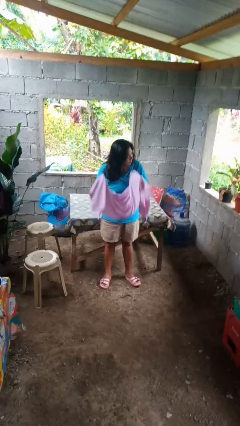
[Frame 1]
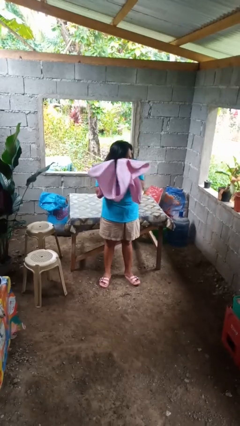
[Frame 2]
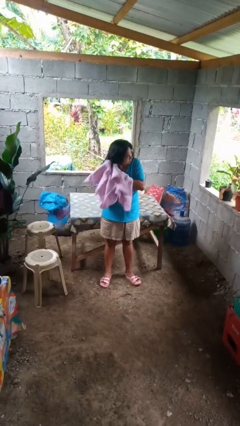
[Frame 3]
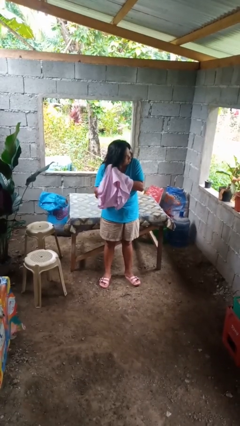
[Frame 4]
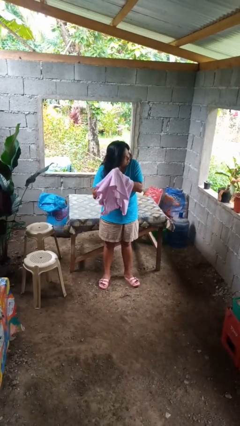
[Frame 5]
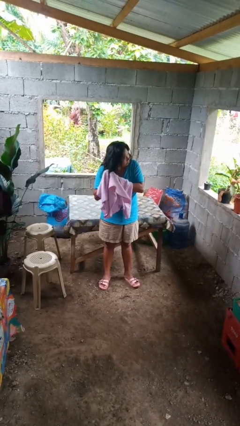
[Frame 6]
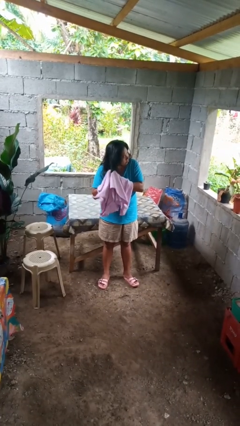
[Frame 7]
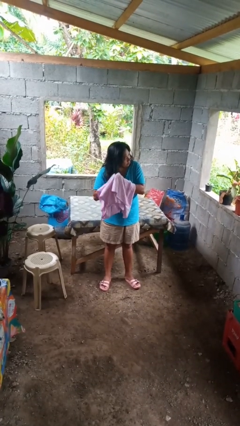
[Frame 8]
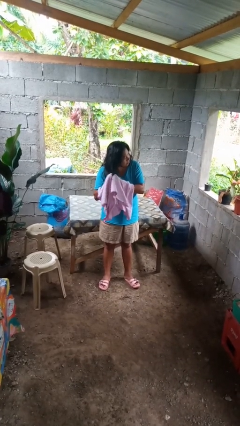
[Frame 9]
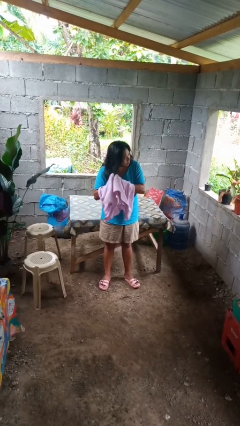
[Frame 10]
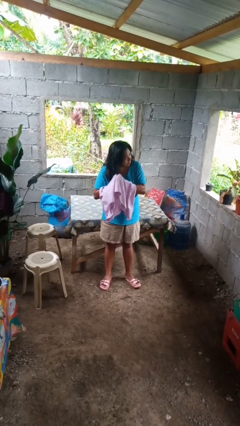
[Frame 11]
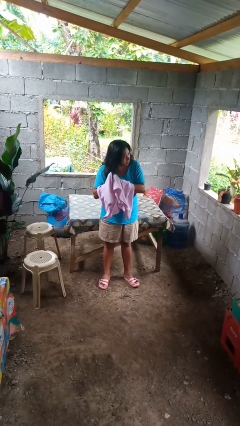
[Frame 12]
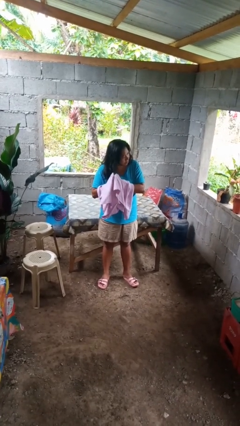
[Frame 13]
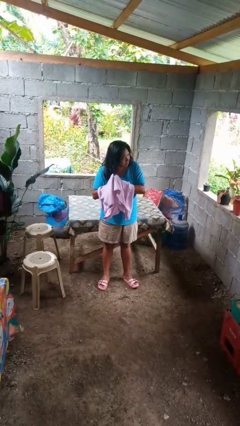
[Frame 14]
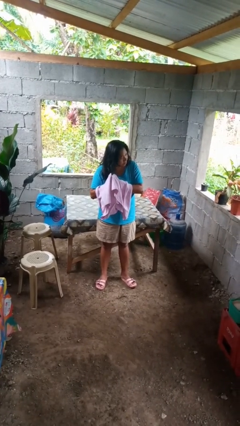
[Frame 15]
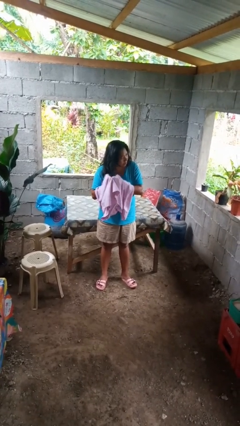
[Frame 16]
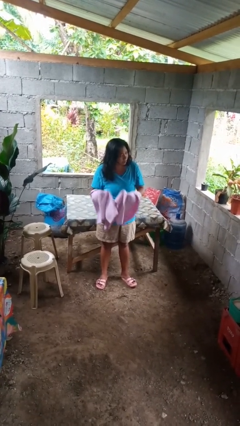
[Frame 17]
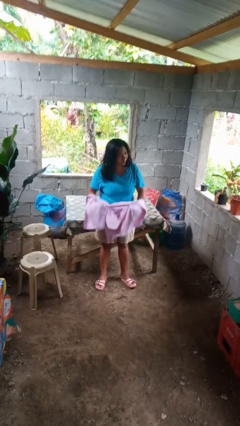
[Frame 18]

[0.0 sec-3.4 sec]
person dries hair with towel

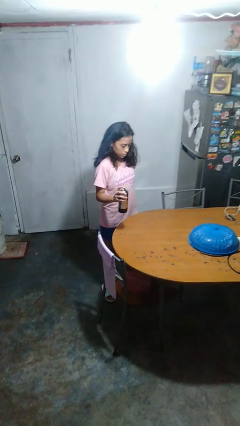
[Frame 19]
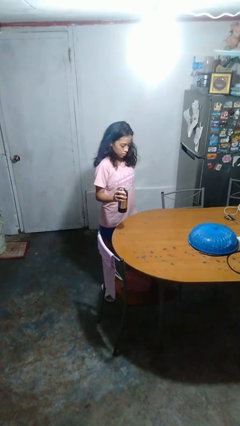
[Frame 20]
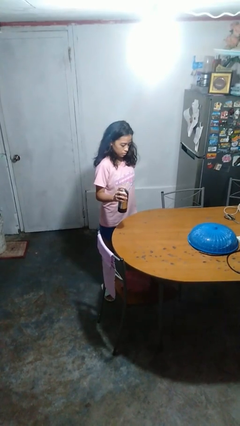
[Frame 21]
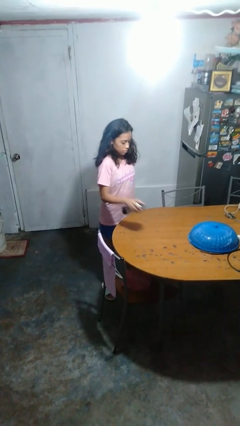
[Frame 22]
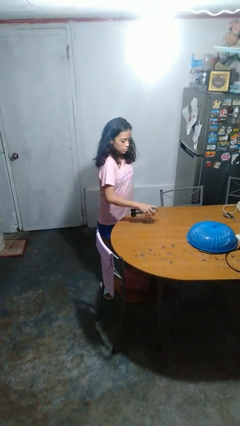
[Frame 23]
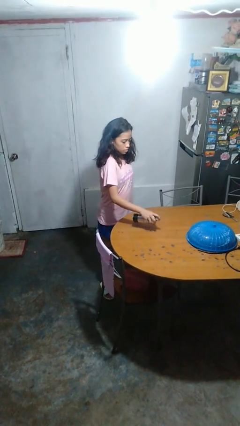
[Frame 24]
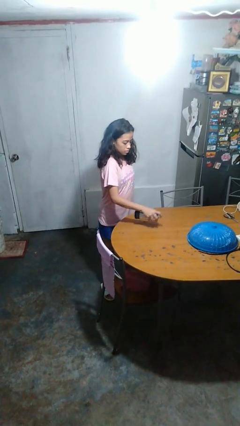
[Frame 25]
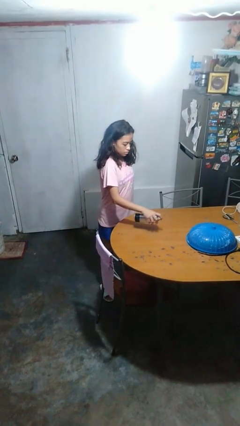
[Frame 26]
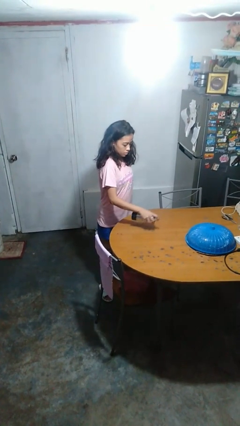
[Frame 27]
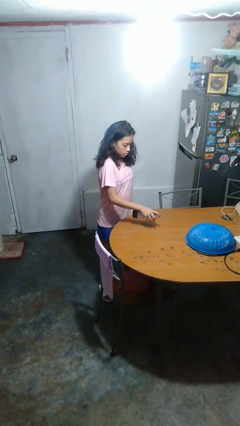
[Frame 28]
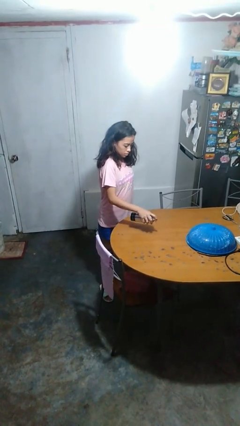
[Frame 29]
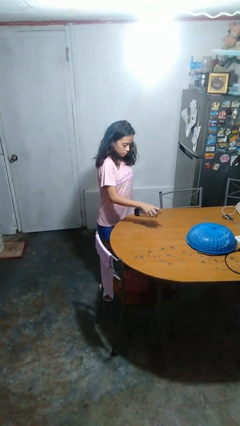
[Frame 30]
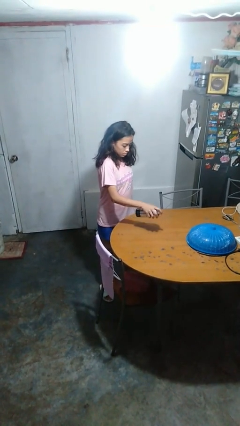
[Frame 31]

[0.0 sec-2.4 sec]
person sprays from bottle

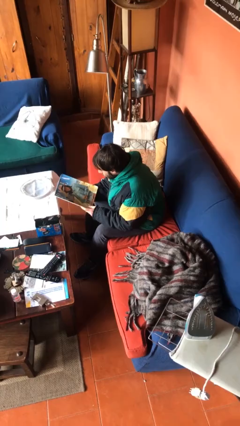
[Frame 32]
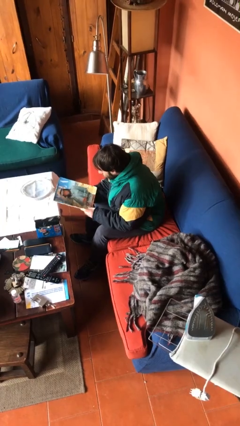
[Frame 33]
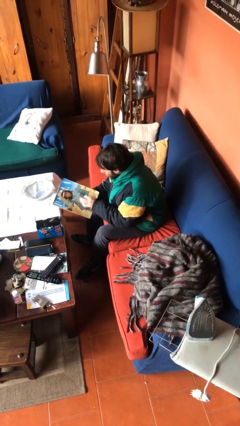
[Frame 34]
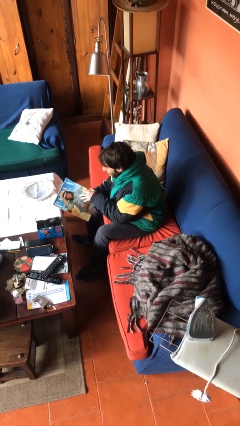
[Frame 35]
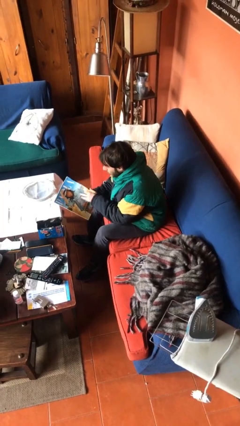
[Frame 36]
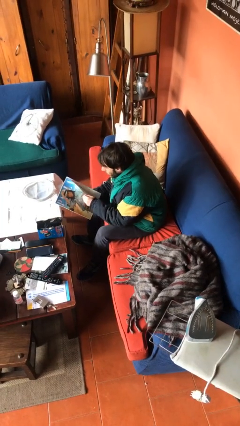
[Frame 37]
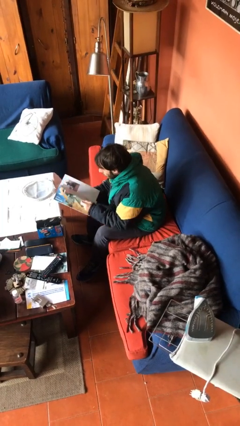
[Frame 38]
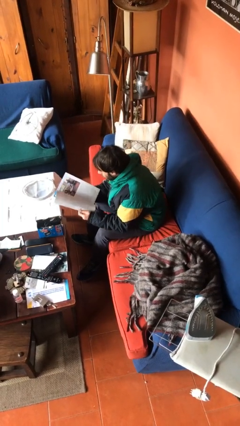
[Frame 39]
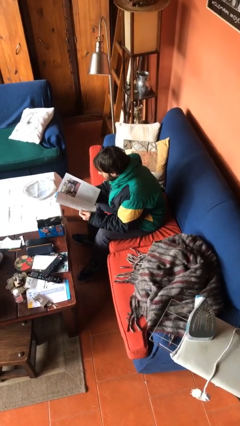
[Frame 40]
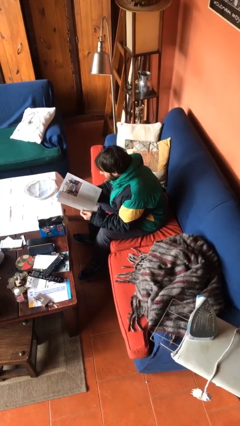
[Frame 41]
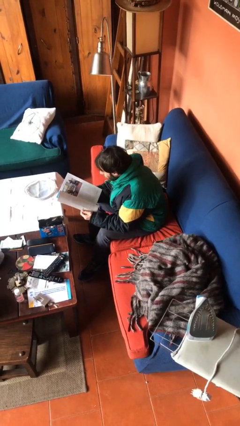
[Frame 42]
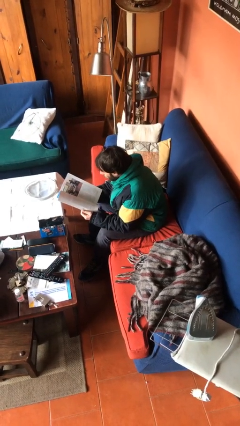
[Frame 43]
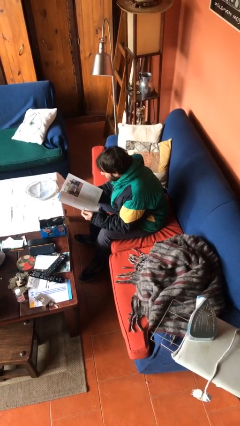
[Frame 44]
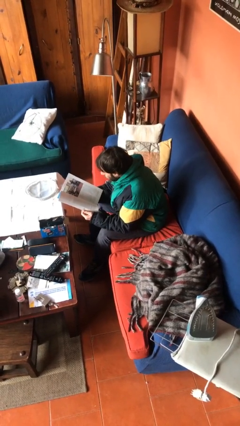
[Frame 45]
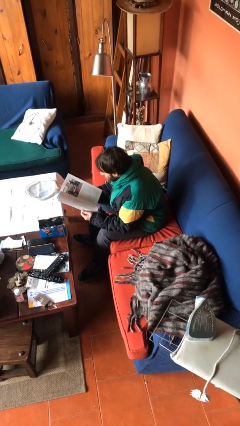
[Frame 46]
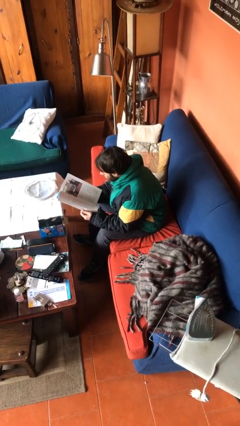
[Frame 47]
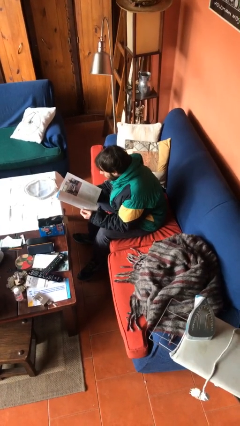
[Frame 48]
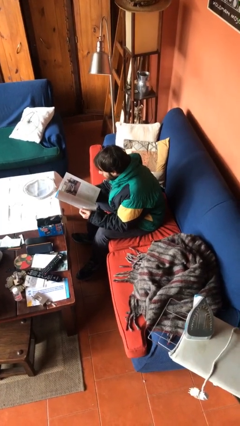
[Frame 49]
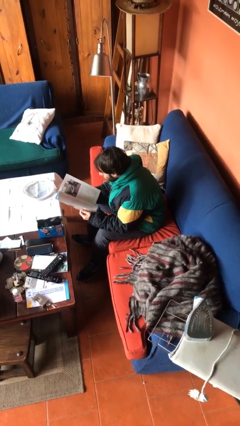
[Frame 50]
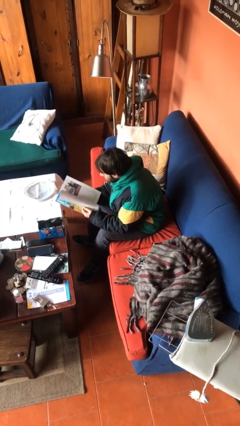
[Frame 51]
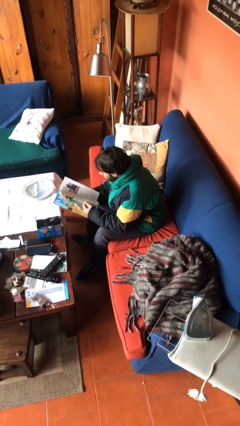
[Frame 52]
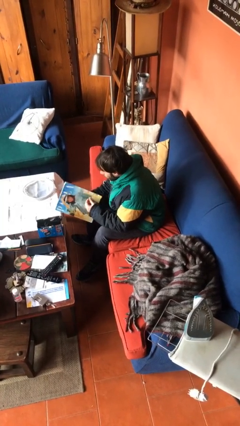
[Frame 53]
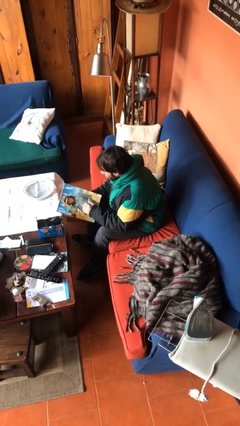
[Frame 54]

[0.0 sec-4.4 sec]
person reads magazine

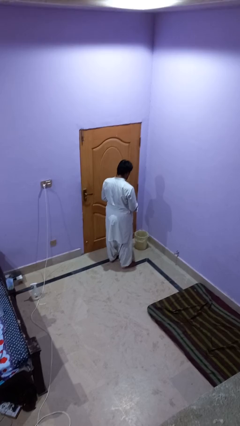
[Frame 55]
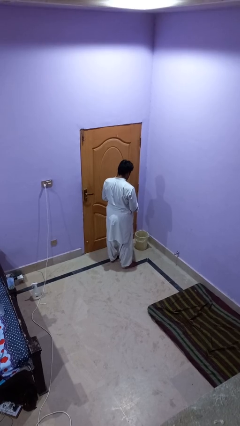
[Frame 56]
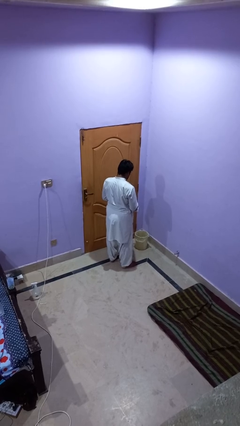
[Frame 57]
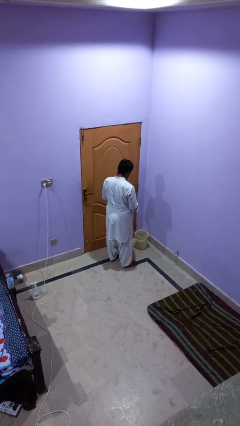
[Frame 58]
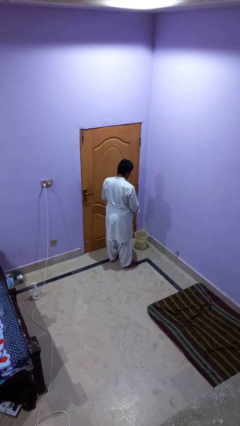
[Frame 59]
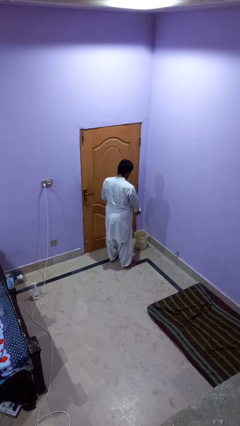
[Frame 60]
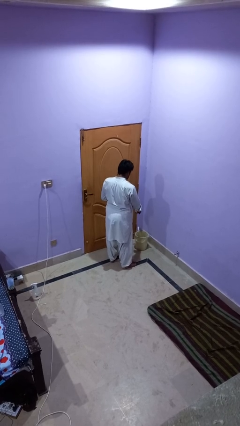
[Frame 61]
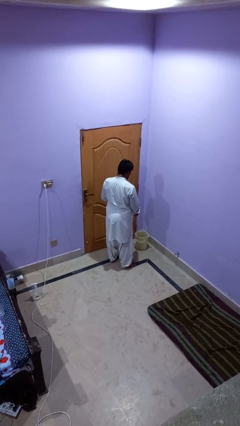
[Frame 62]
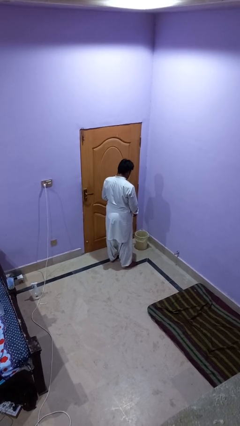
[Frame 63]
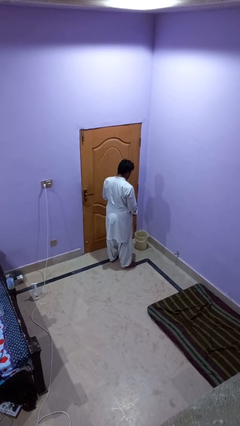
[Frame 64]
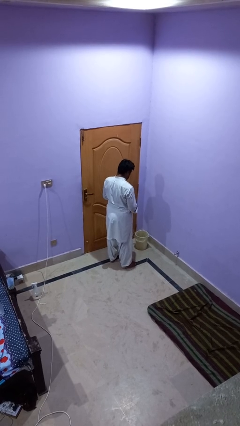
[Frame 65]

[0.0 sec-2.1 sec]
person discards trash

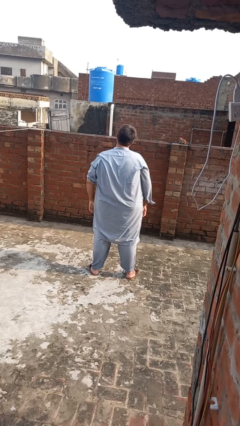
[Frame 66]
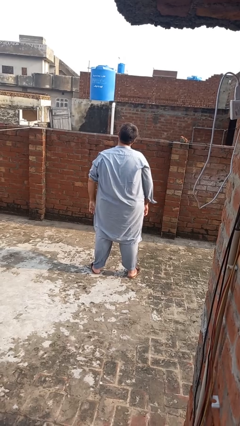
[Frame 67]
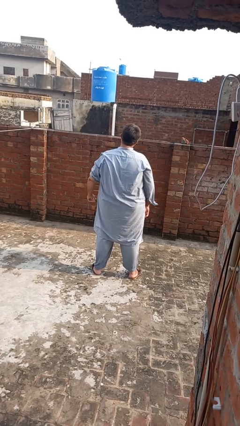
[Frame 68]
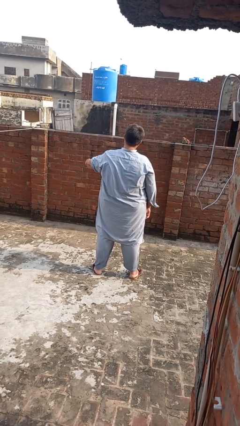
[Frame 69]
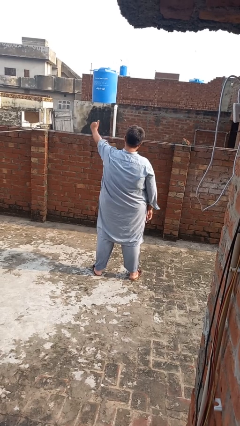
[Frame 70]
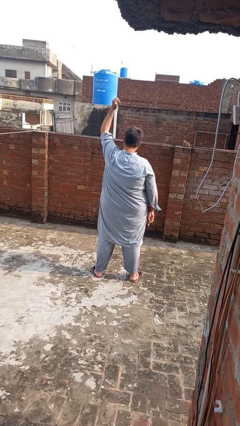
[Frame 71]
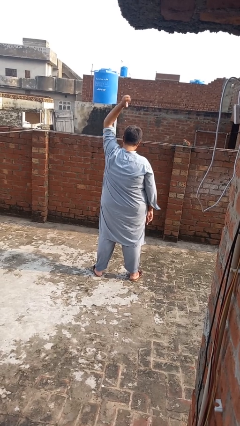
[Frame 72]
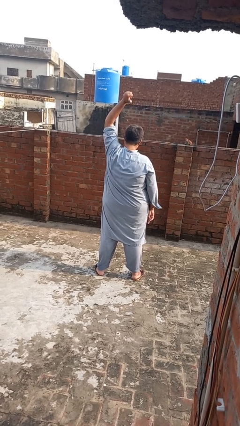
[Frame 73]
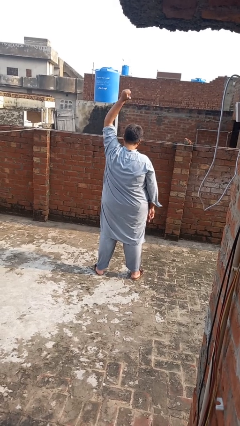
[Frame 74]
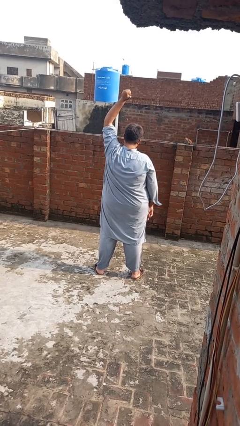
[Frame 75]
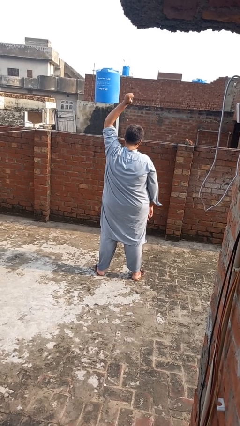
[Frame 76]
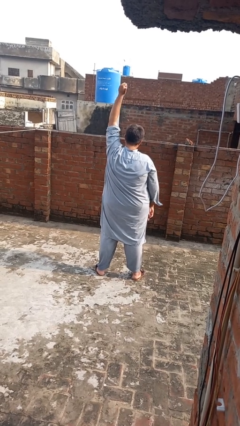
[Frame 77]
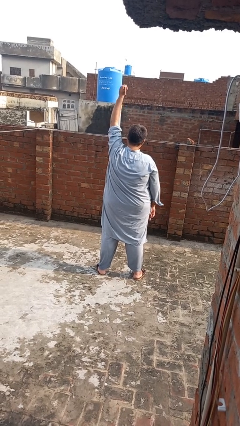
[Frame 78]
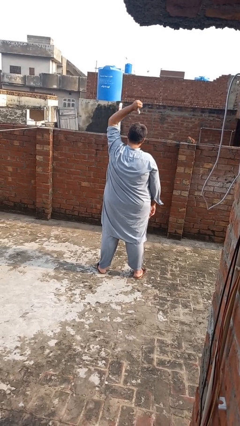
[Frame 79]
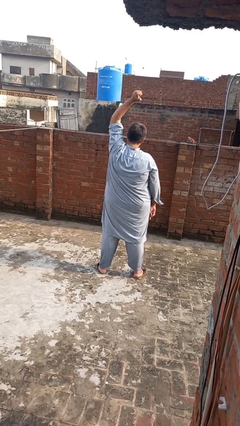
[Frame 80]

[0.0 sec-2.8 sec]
person gestures behind me

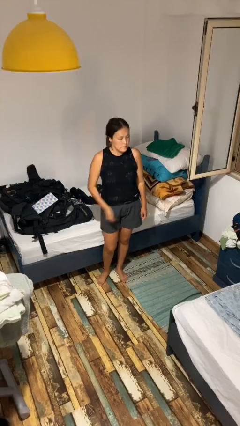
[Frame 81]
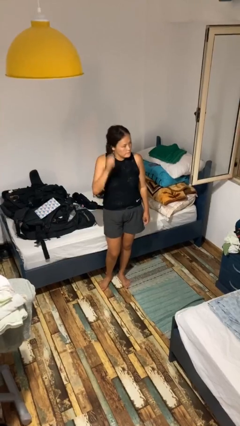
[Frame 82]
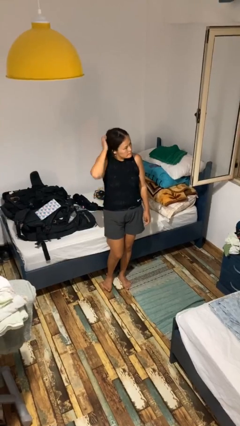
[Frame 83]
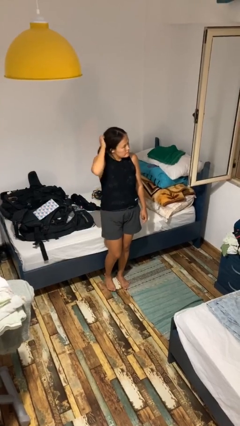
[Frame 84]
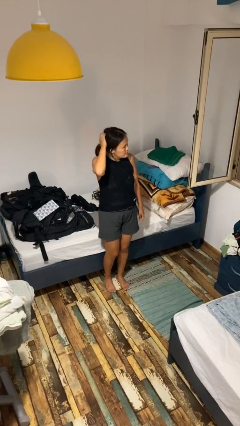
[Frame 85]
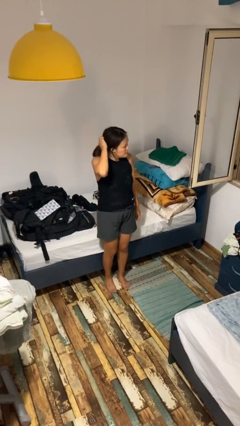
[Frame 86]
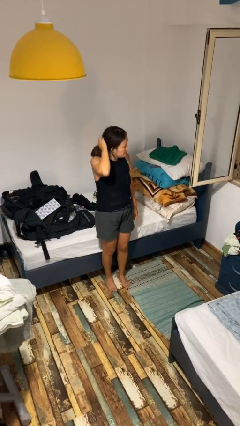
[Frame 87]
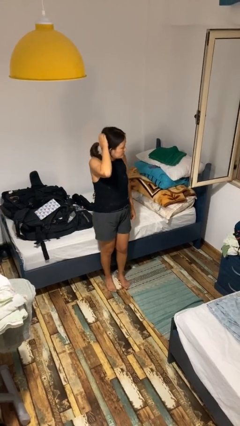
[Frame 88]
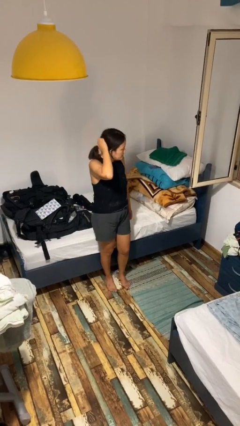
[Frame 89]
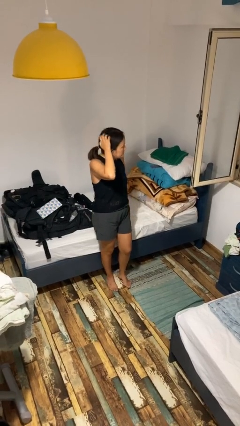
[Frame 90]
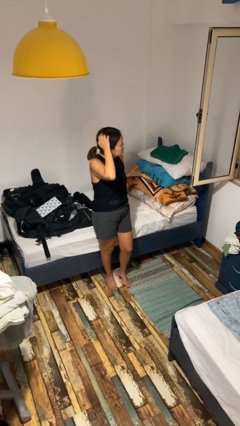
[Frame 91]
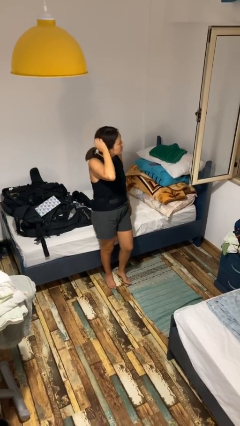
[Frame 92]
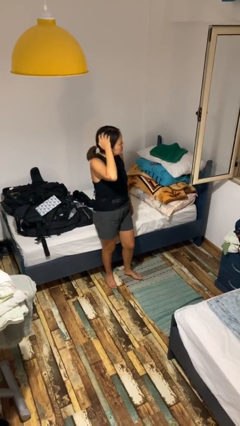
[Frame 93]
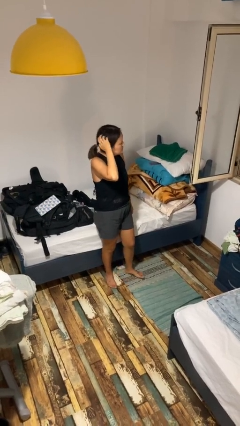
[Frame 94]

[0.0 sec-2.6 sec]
person scratches face
